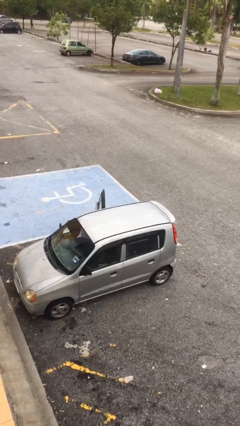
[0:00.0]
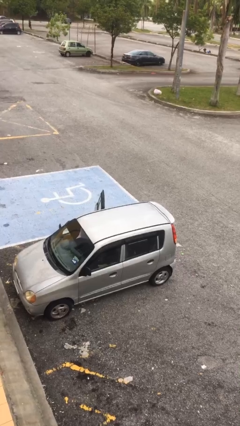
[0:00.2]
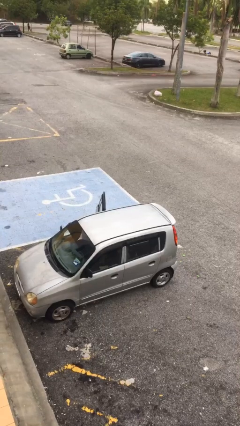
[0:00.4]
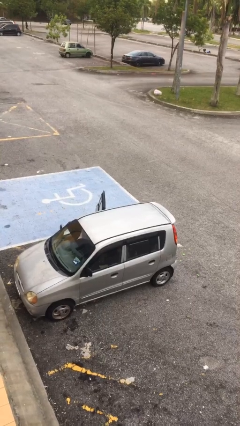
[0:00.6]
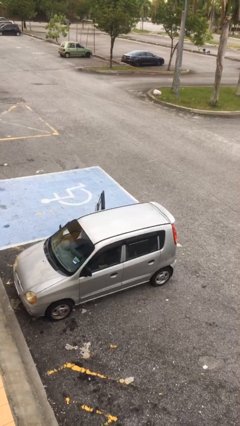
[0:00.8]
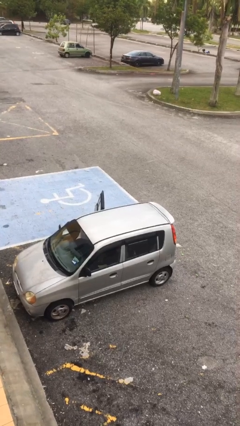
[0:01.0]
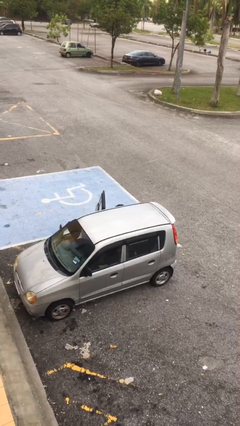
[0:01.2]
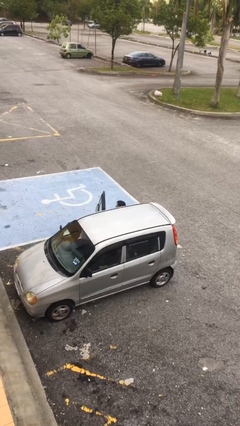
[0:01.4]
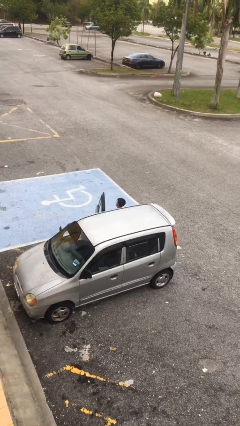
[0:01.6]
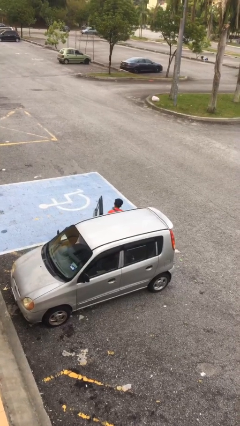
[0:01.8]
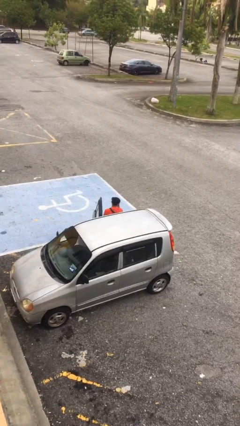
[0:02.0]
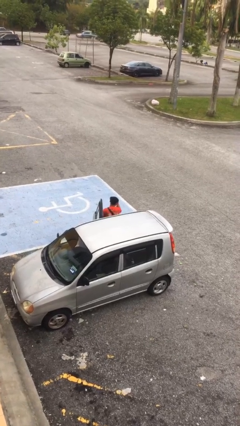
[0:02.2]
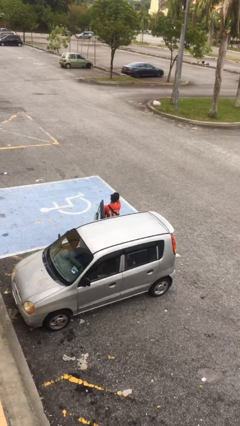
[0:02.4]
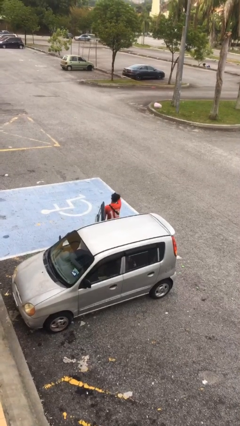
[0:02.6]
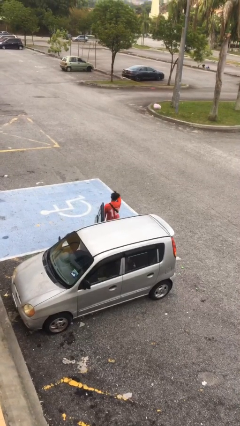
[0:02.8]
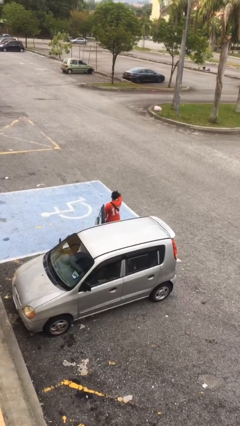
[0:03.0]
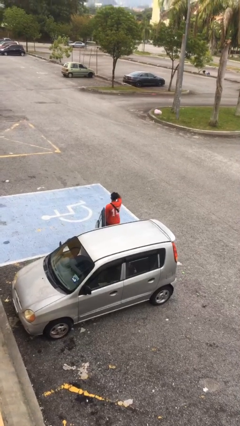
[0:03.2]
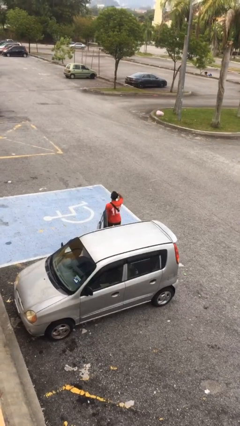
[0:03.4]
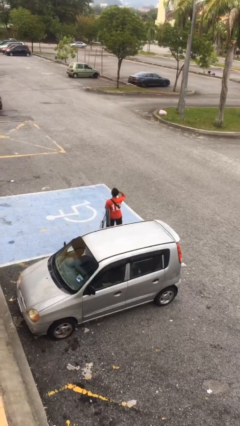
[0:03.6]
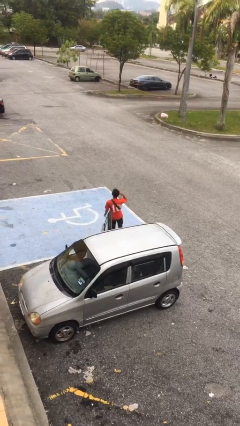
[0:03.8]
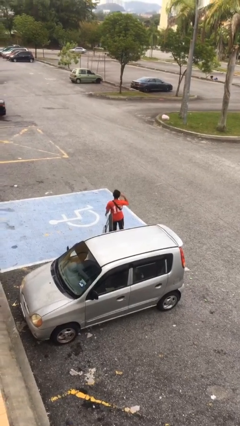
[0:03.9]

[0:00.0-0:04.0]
person exits car

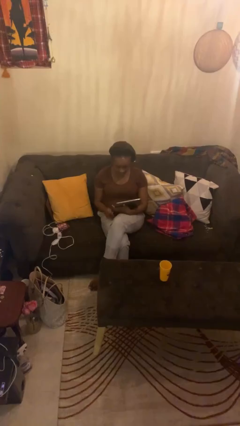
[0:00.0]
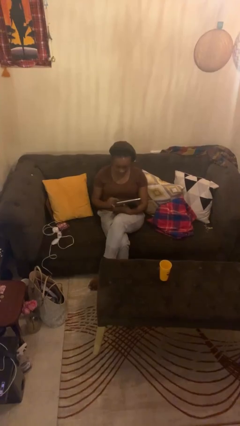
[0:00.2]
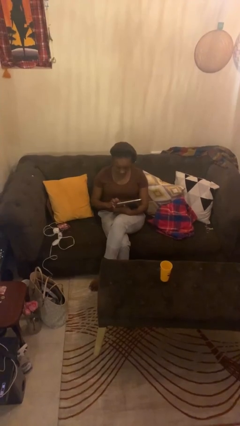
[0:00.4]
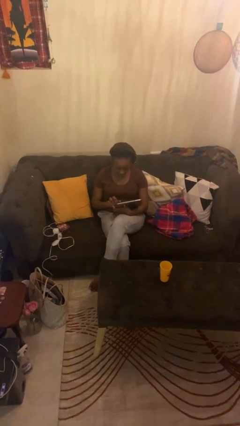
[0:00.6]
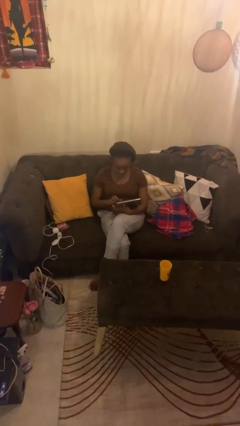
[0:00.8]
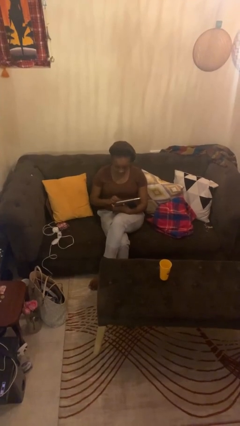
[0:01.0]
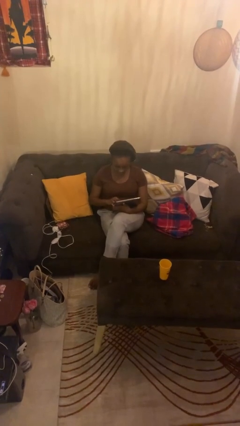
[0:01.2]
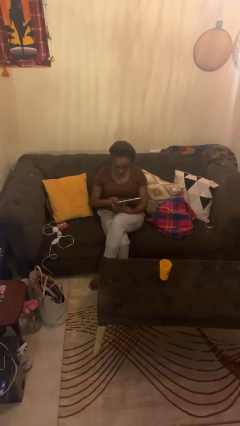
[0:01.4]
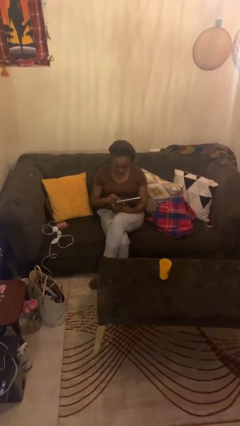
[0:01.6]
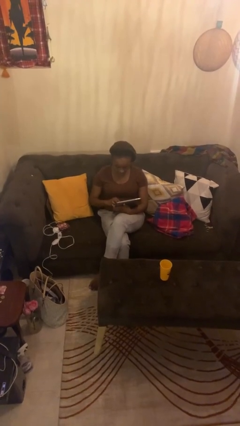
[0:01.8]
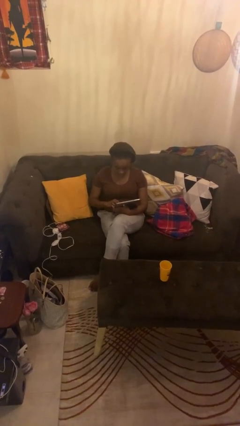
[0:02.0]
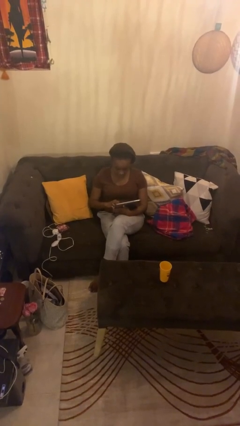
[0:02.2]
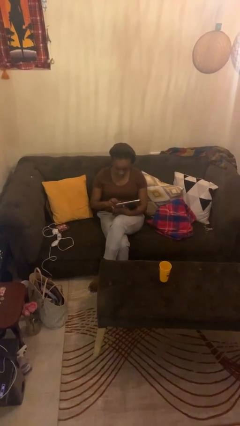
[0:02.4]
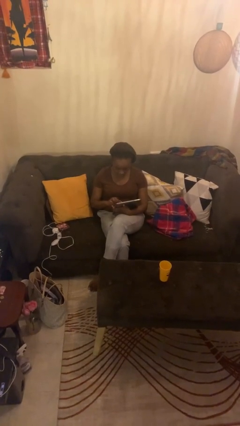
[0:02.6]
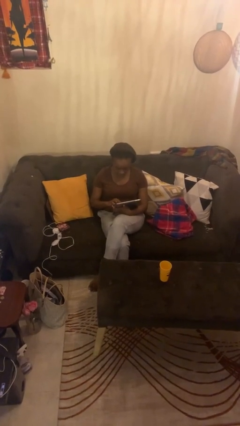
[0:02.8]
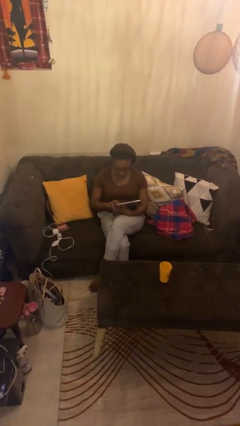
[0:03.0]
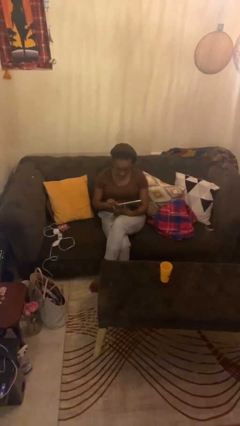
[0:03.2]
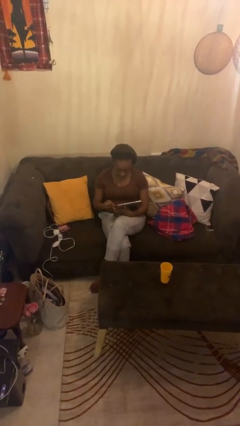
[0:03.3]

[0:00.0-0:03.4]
person interacts with tablet

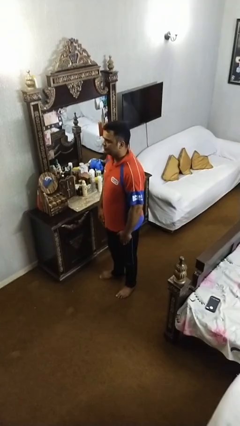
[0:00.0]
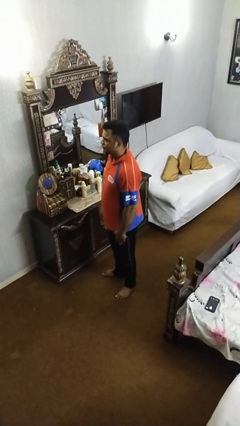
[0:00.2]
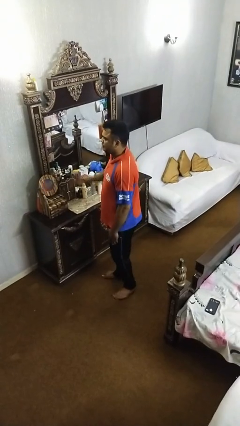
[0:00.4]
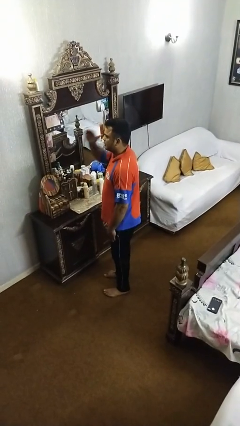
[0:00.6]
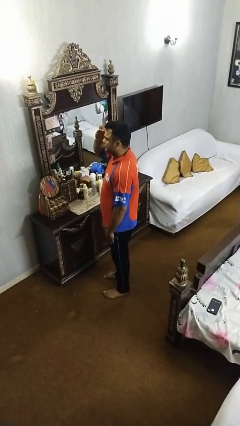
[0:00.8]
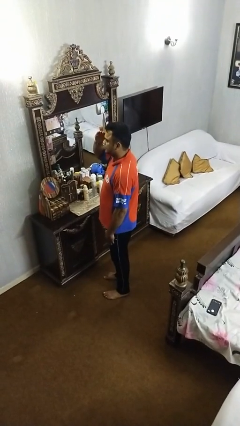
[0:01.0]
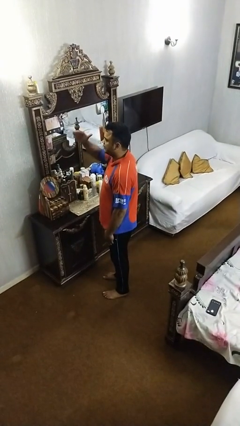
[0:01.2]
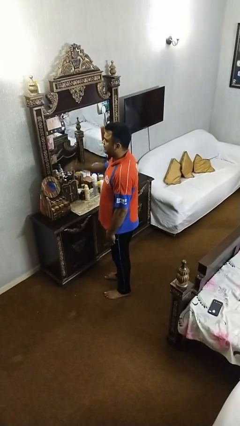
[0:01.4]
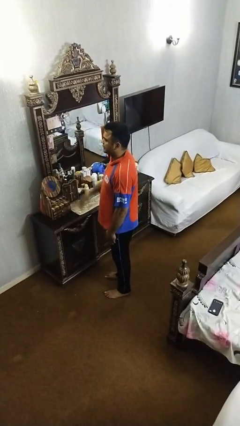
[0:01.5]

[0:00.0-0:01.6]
person salutes

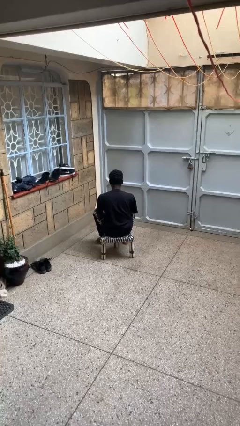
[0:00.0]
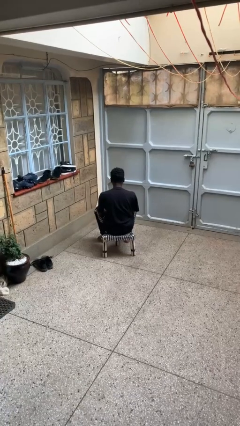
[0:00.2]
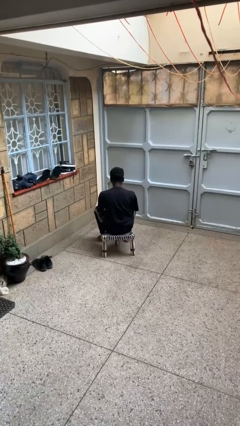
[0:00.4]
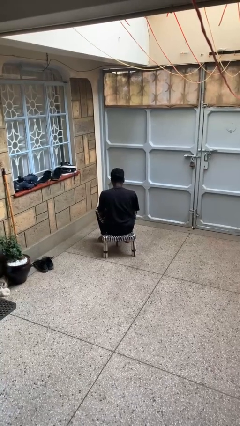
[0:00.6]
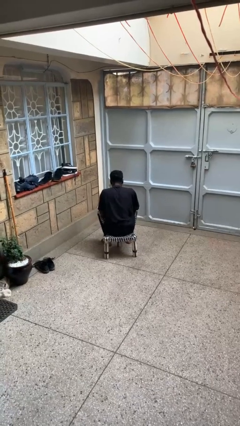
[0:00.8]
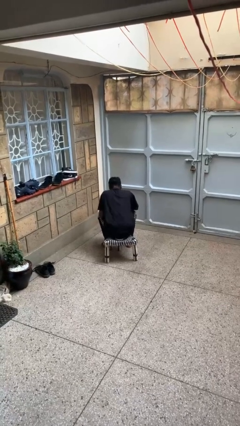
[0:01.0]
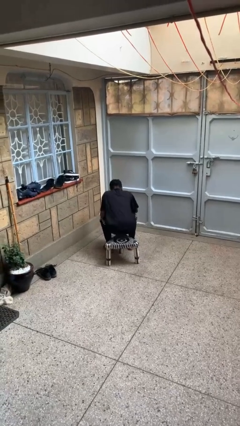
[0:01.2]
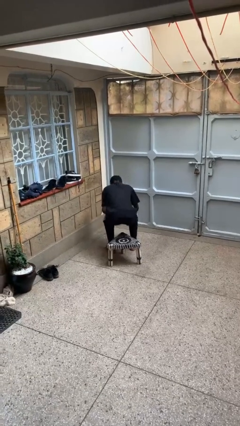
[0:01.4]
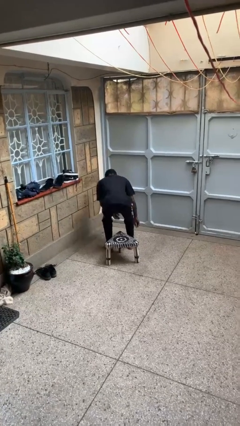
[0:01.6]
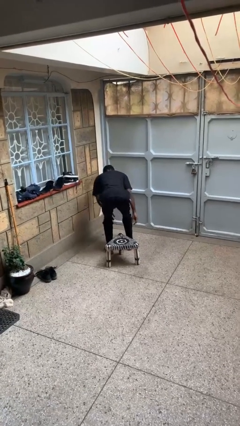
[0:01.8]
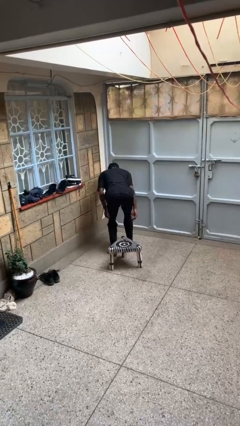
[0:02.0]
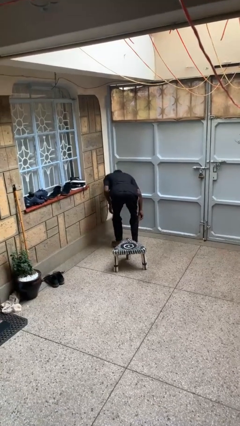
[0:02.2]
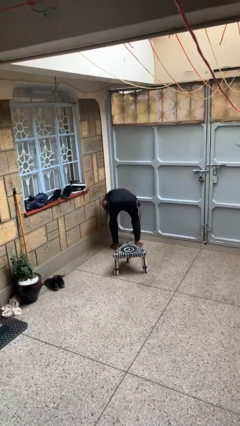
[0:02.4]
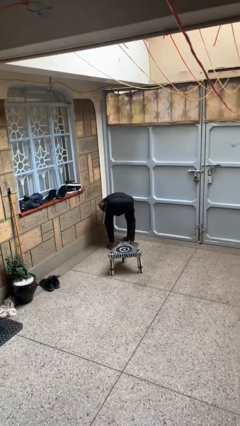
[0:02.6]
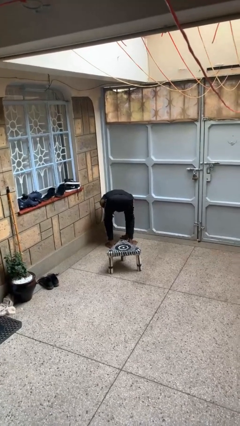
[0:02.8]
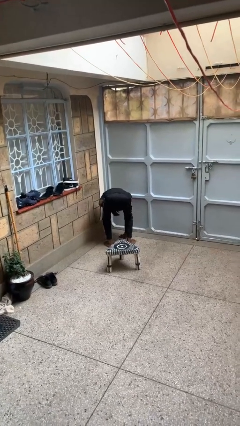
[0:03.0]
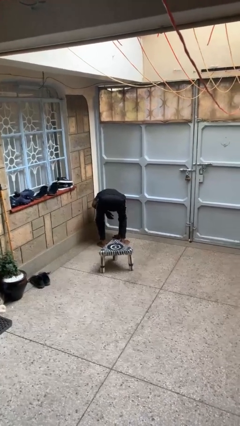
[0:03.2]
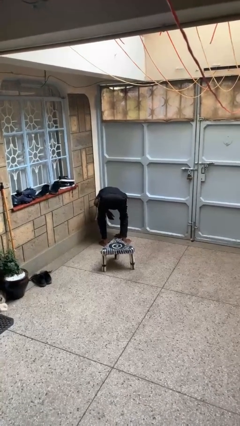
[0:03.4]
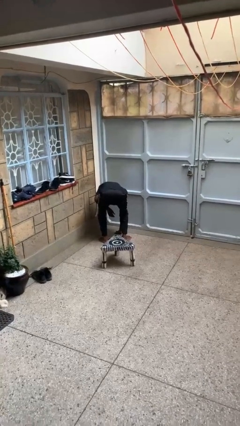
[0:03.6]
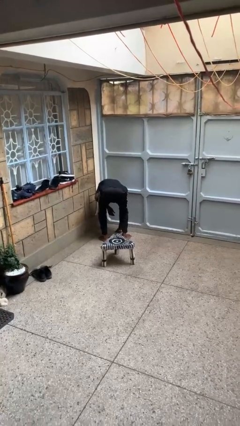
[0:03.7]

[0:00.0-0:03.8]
person falls from chair

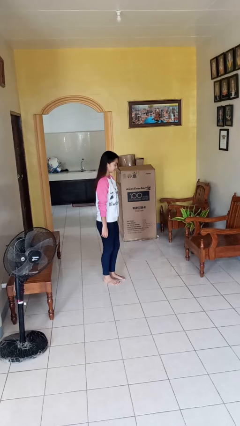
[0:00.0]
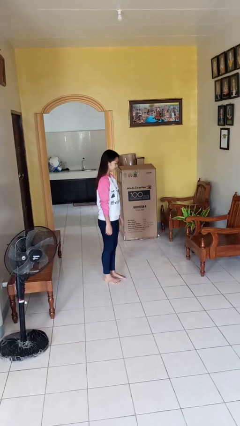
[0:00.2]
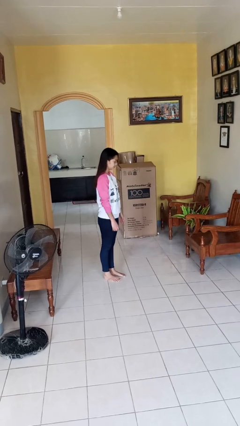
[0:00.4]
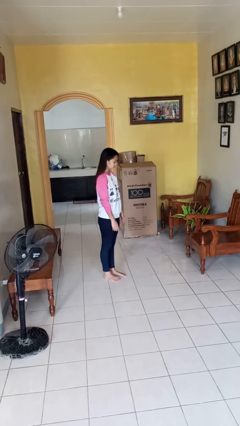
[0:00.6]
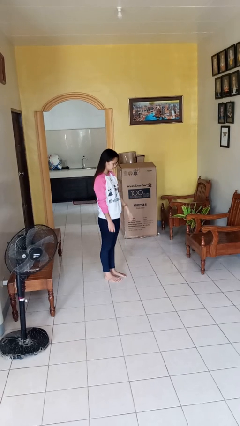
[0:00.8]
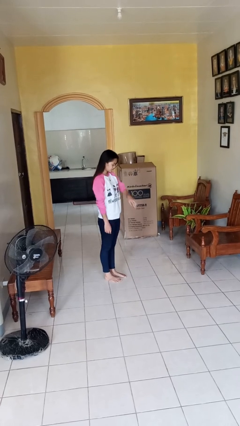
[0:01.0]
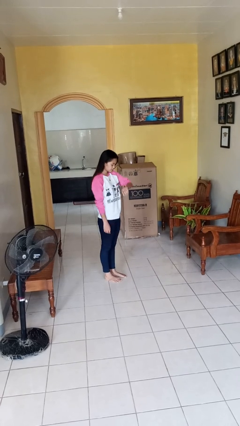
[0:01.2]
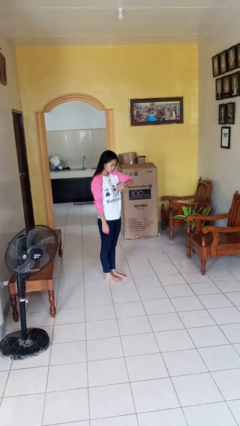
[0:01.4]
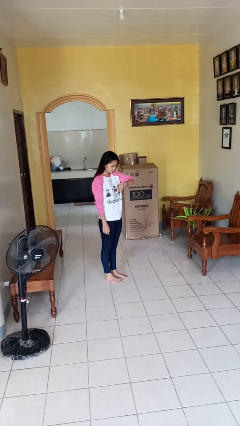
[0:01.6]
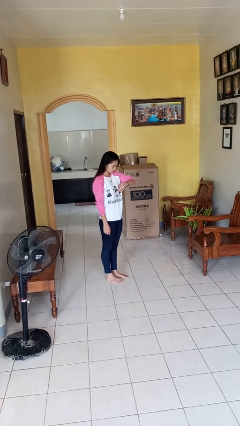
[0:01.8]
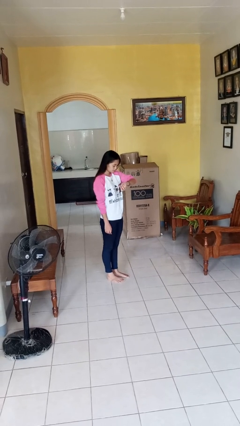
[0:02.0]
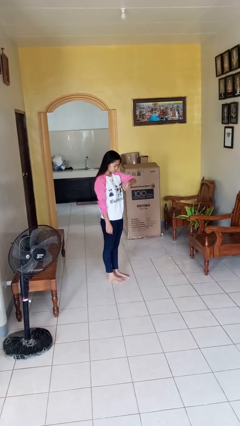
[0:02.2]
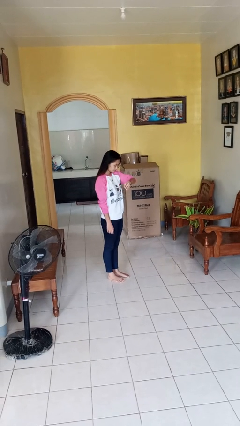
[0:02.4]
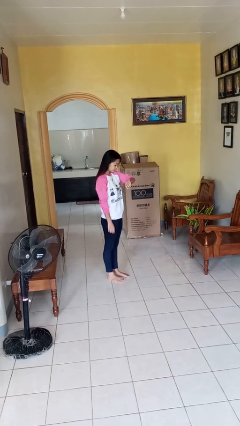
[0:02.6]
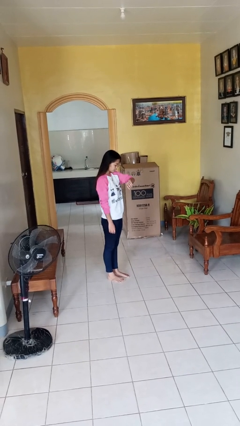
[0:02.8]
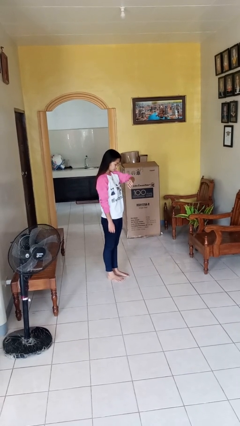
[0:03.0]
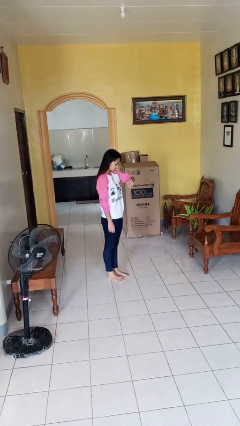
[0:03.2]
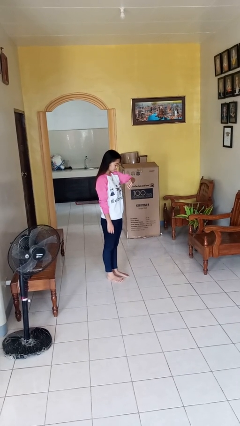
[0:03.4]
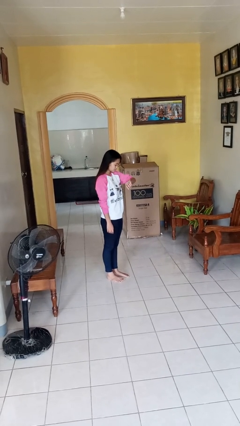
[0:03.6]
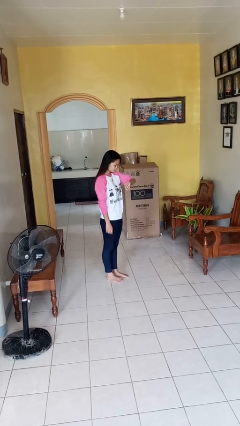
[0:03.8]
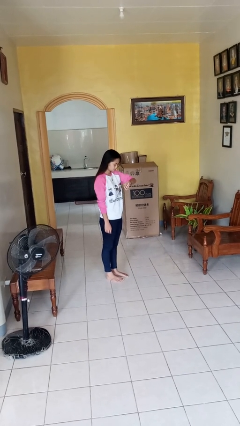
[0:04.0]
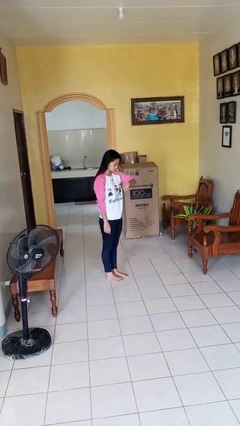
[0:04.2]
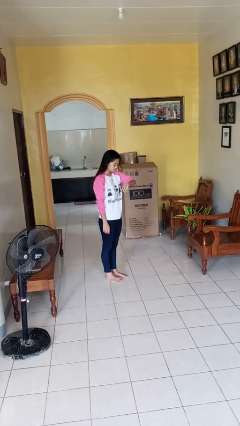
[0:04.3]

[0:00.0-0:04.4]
person looks at wristwatch
